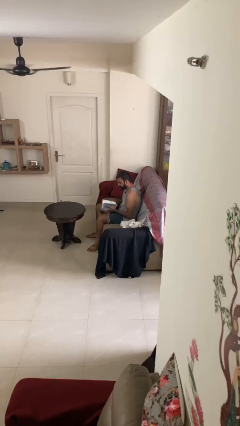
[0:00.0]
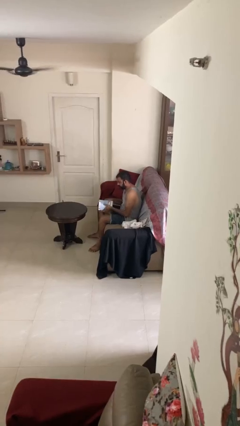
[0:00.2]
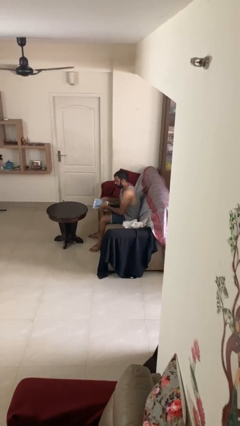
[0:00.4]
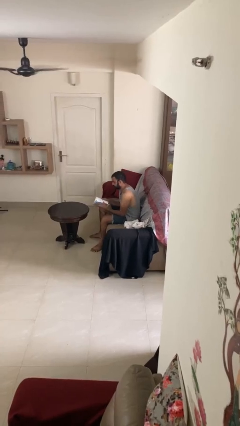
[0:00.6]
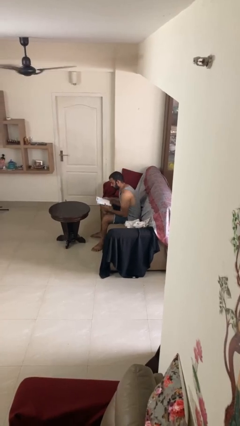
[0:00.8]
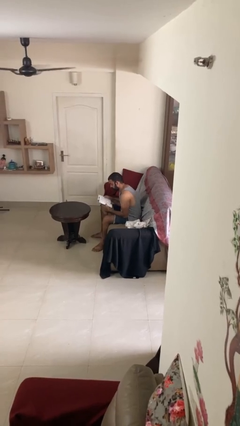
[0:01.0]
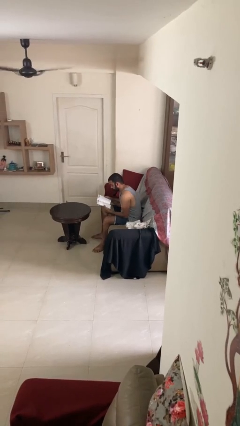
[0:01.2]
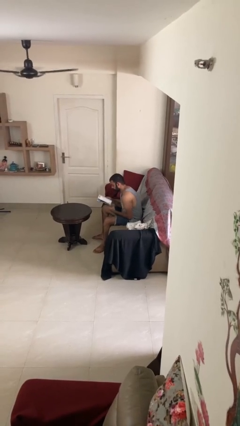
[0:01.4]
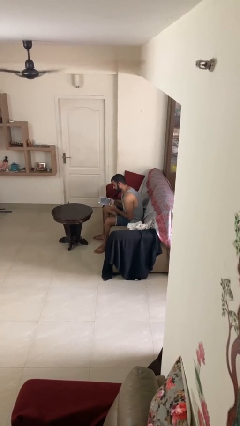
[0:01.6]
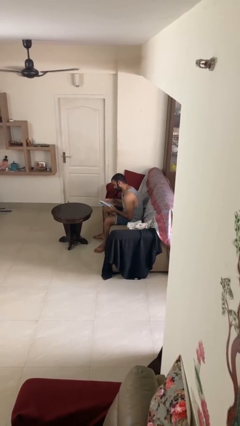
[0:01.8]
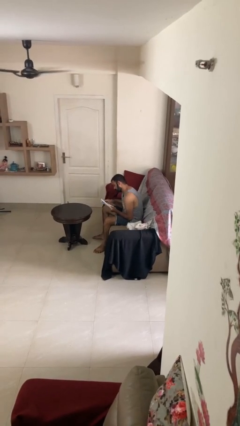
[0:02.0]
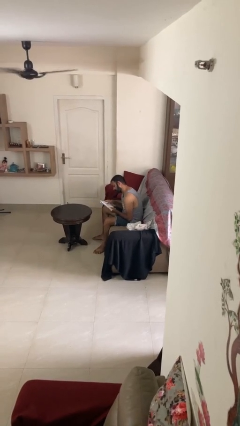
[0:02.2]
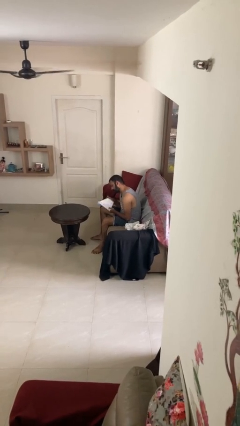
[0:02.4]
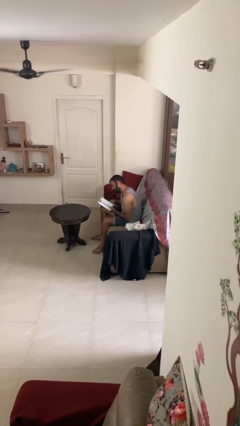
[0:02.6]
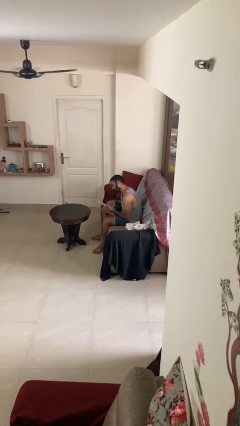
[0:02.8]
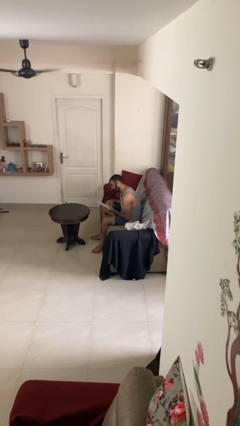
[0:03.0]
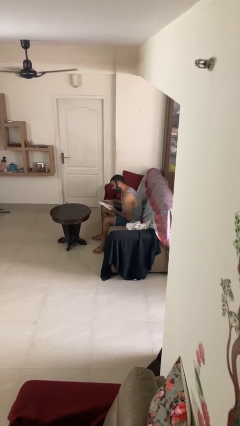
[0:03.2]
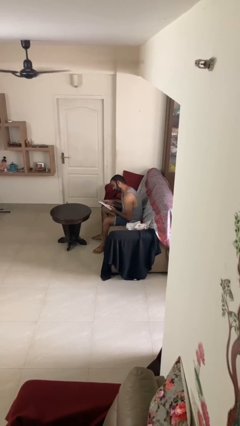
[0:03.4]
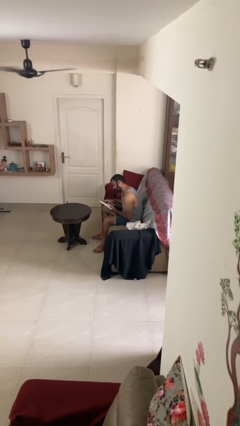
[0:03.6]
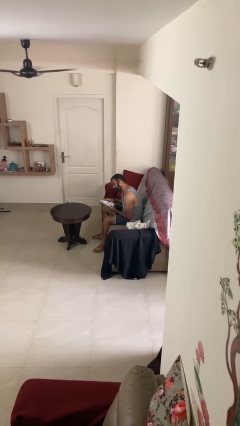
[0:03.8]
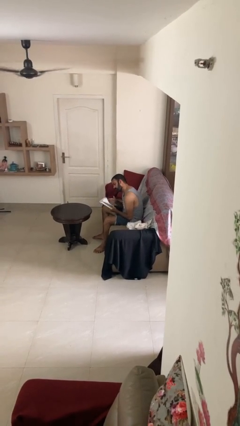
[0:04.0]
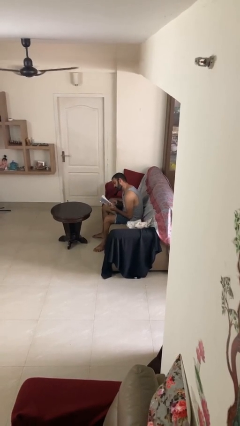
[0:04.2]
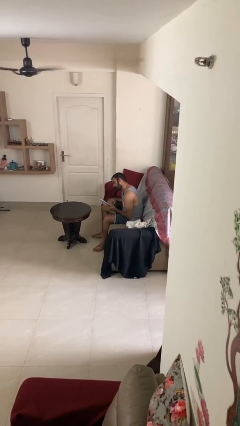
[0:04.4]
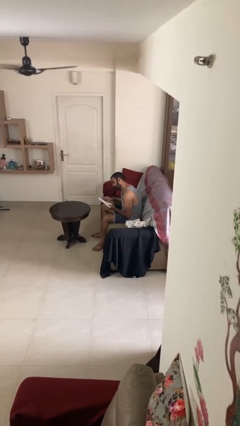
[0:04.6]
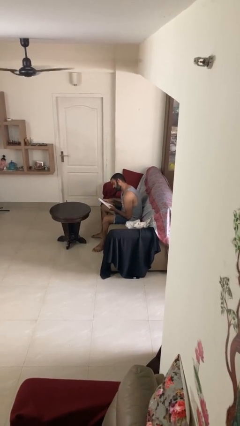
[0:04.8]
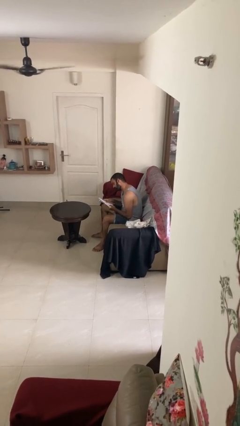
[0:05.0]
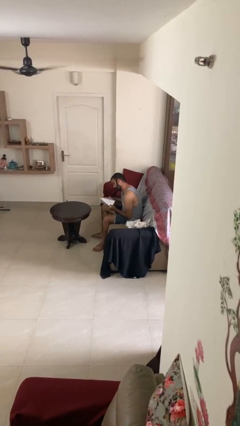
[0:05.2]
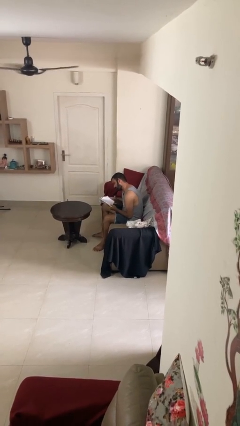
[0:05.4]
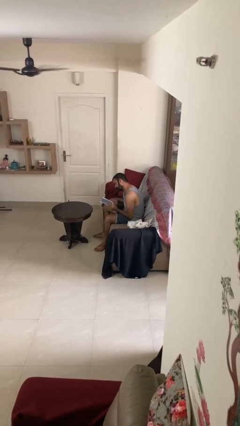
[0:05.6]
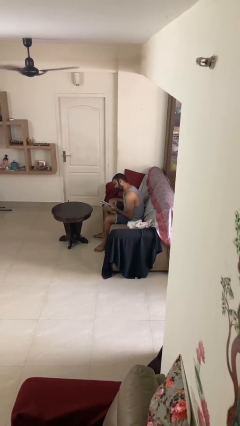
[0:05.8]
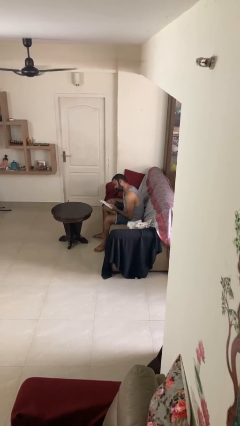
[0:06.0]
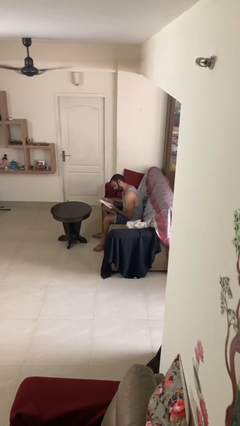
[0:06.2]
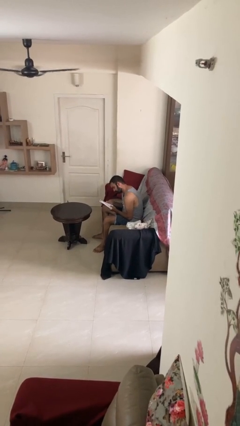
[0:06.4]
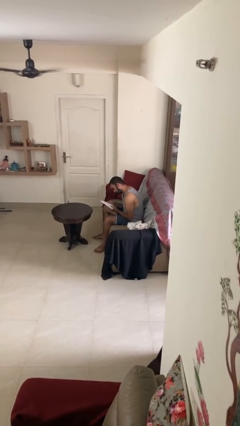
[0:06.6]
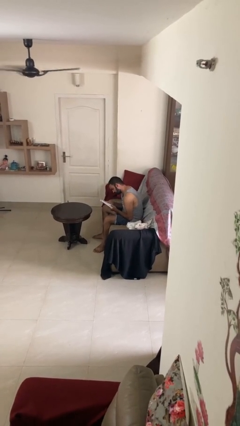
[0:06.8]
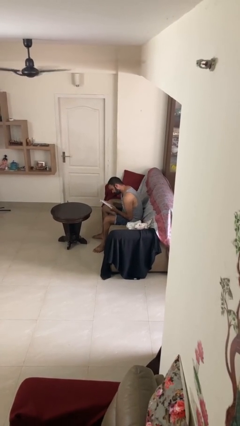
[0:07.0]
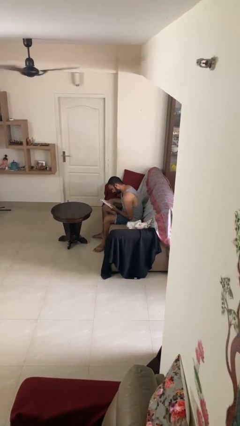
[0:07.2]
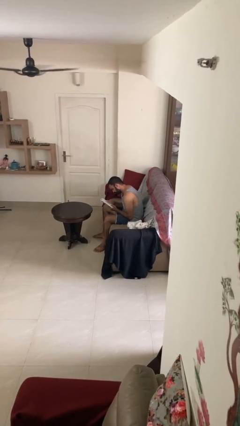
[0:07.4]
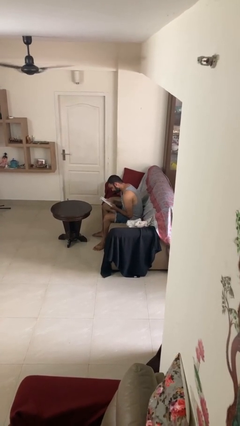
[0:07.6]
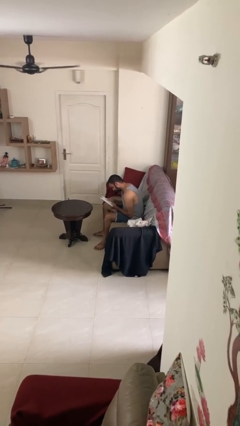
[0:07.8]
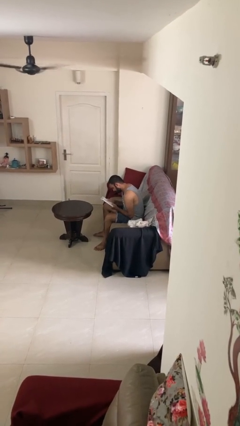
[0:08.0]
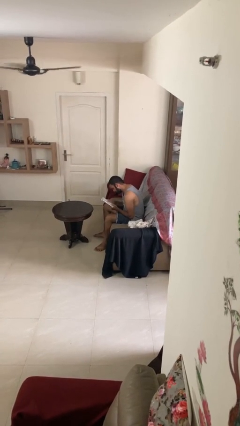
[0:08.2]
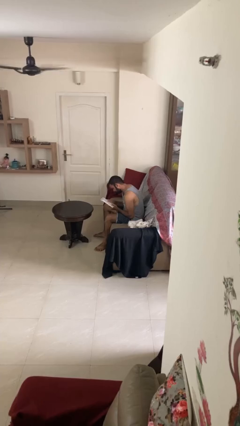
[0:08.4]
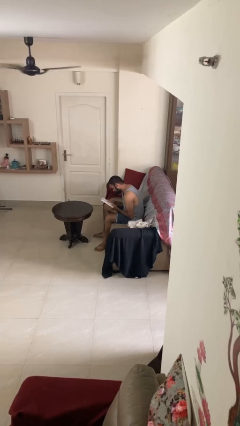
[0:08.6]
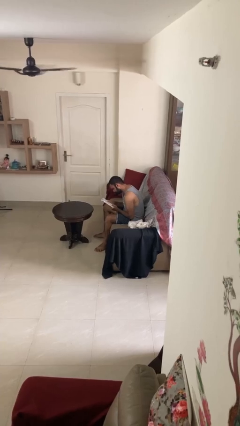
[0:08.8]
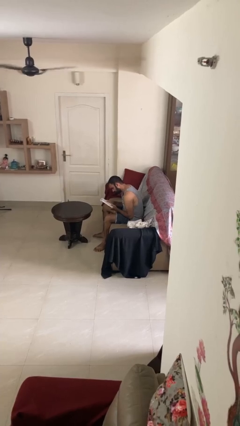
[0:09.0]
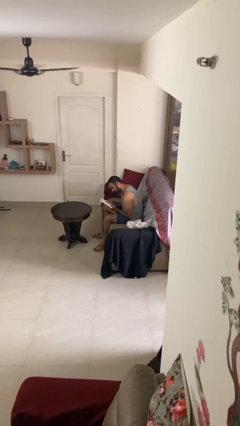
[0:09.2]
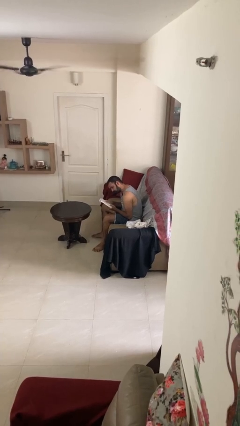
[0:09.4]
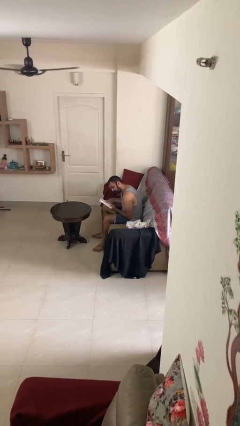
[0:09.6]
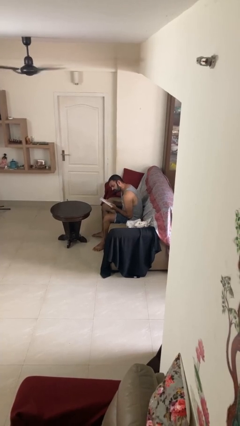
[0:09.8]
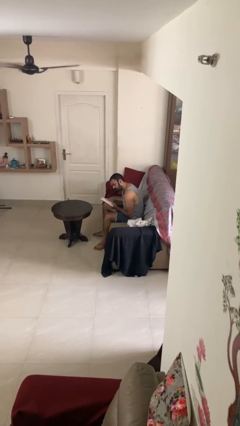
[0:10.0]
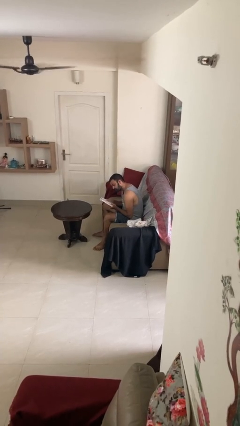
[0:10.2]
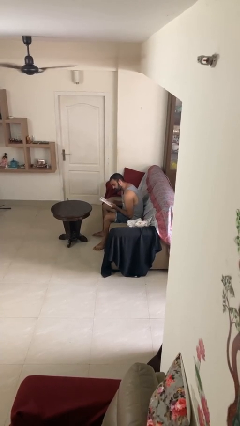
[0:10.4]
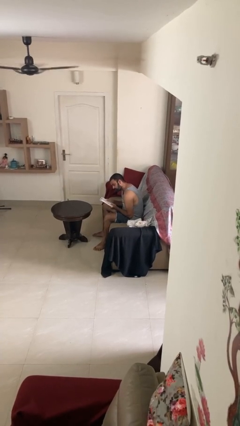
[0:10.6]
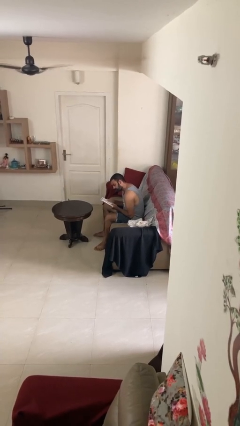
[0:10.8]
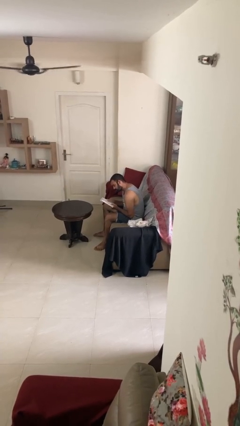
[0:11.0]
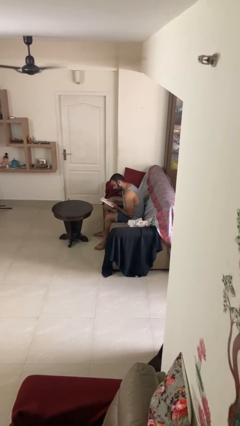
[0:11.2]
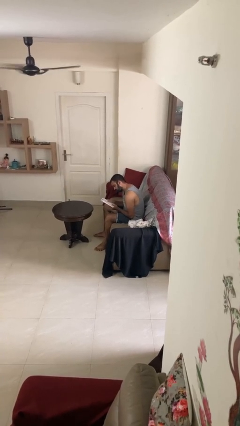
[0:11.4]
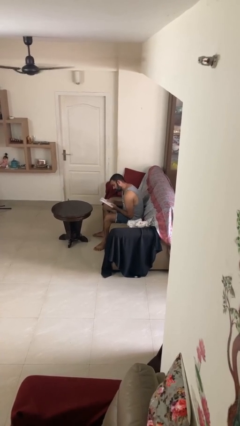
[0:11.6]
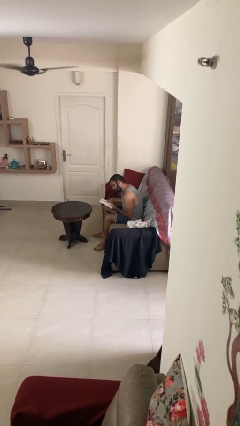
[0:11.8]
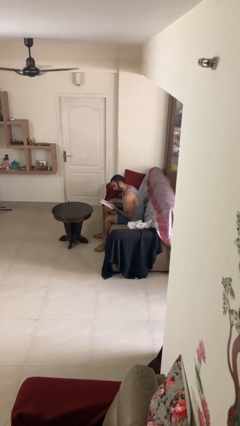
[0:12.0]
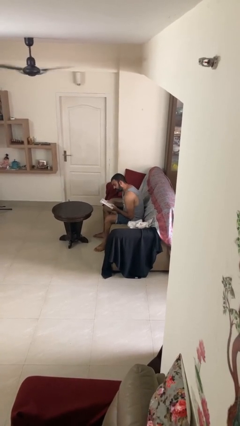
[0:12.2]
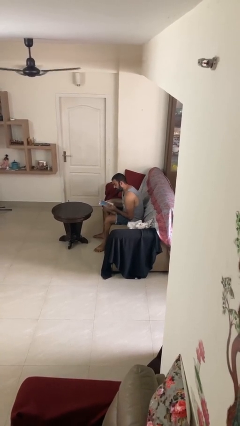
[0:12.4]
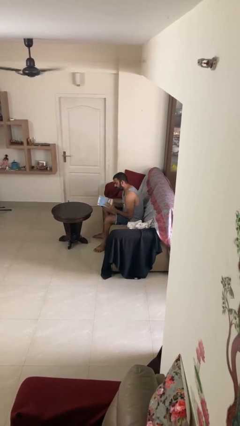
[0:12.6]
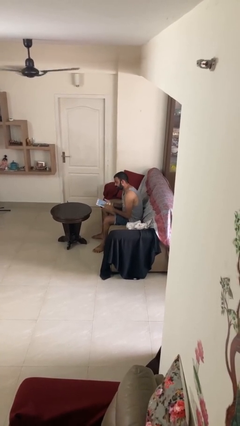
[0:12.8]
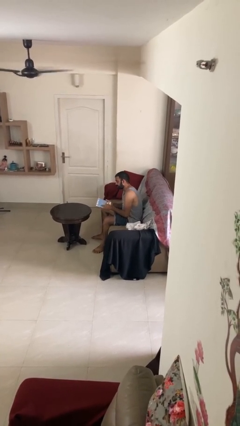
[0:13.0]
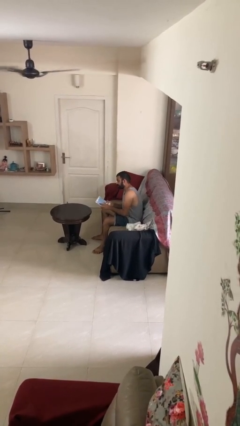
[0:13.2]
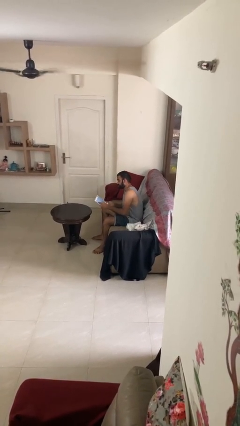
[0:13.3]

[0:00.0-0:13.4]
person reads document

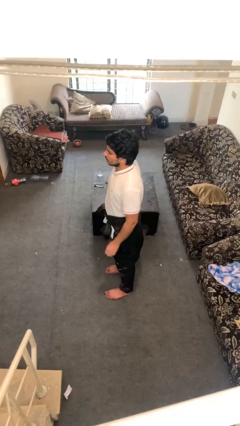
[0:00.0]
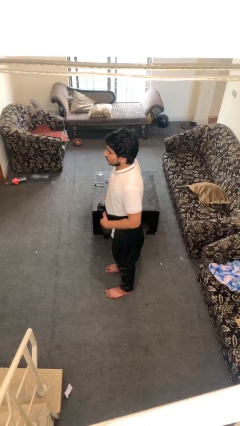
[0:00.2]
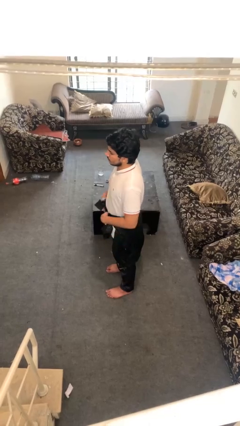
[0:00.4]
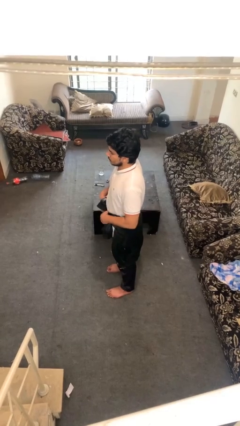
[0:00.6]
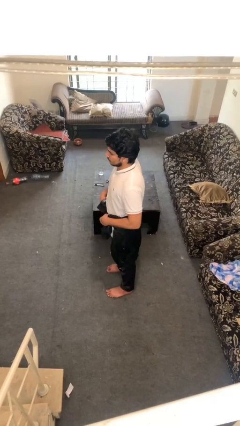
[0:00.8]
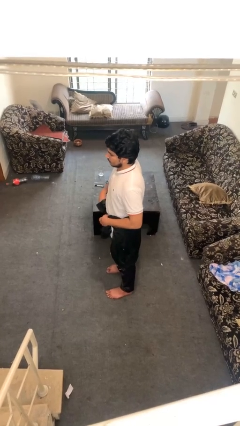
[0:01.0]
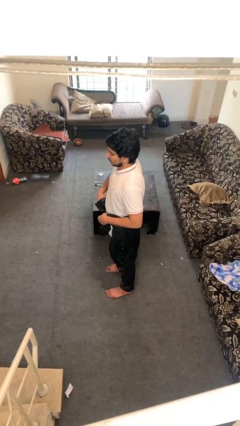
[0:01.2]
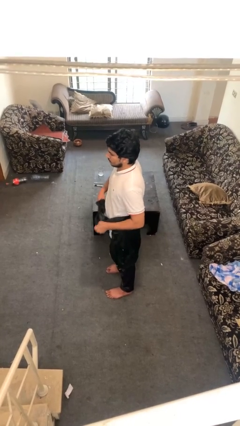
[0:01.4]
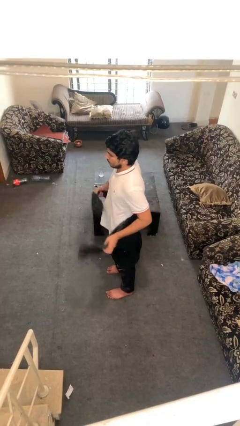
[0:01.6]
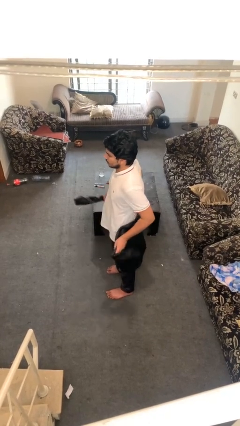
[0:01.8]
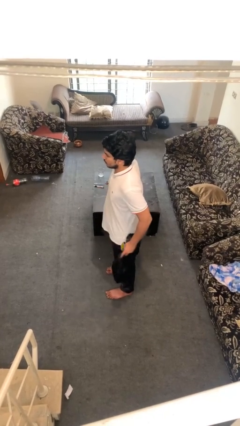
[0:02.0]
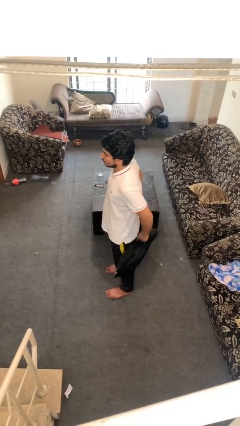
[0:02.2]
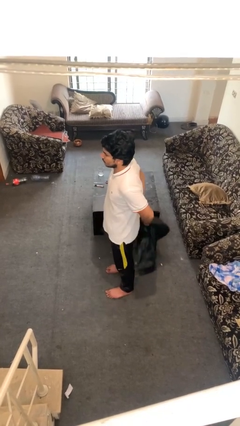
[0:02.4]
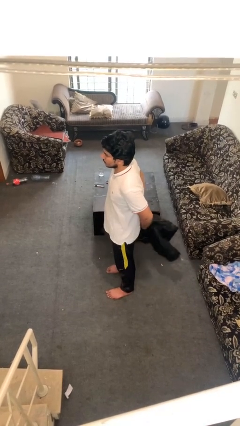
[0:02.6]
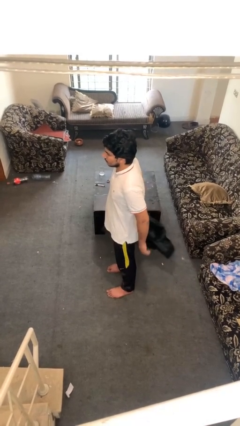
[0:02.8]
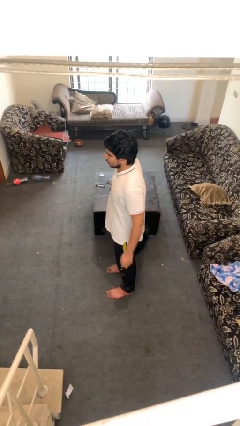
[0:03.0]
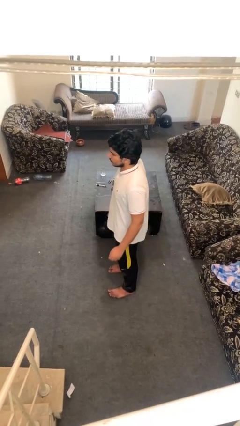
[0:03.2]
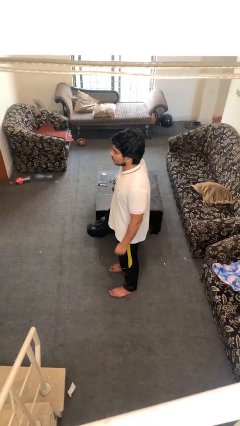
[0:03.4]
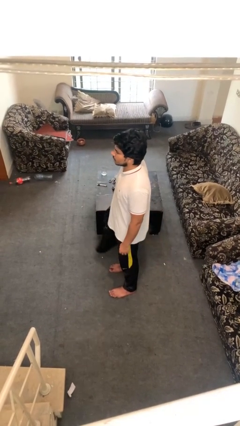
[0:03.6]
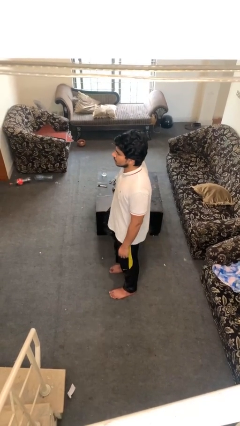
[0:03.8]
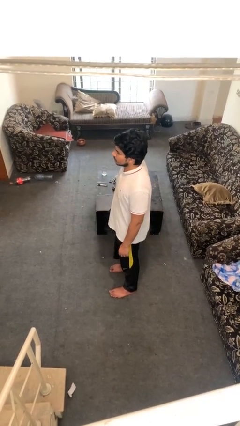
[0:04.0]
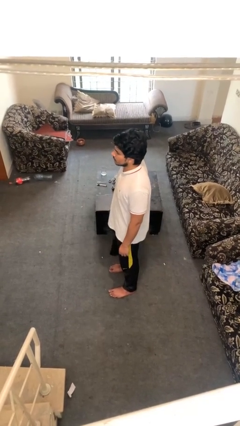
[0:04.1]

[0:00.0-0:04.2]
person unties jacket around waist

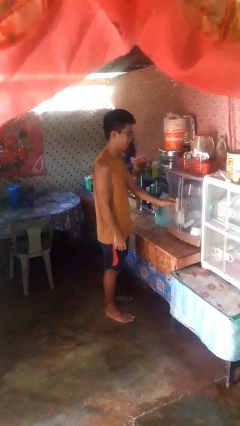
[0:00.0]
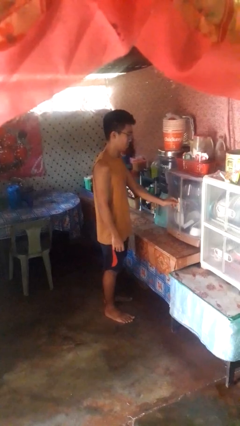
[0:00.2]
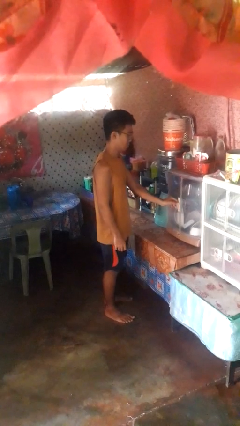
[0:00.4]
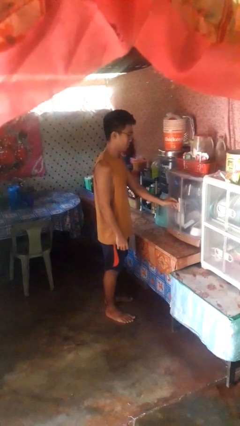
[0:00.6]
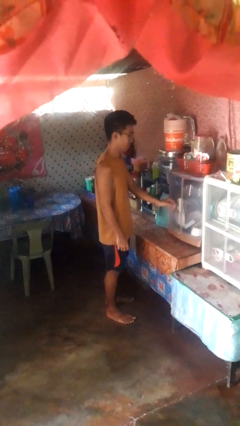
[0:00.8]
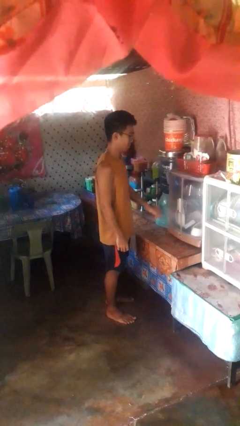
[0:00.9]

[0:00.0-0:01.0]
person closes cabinet
